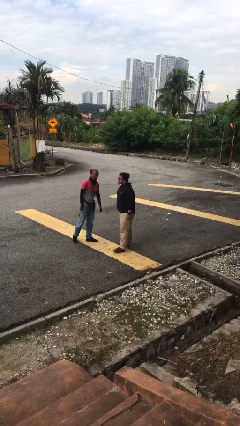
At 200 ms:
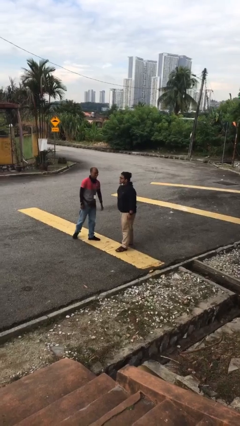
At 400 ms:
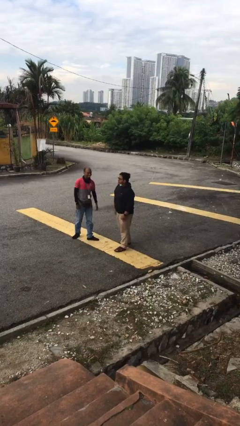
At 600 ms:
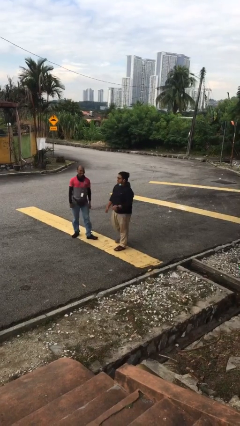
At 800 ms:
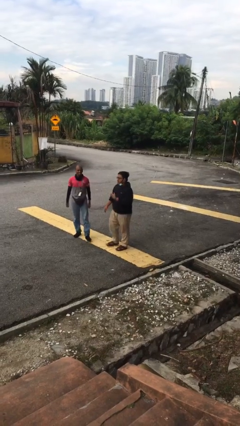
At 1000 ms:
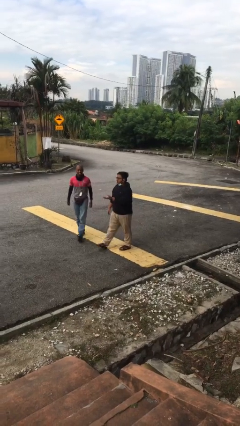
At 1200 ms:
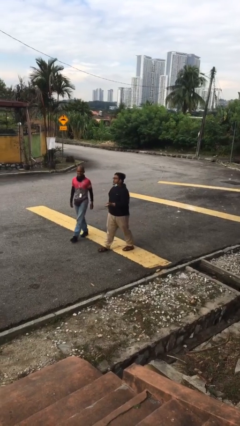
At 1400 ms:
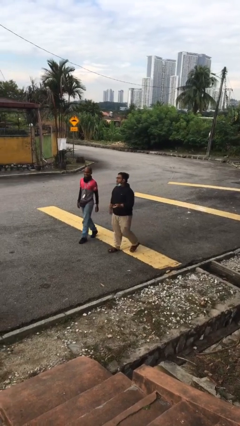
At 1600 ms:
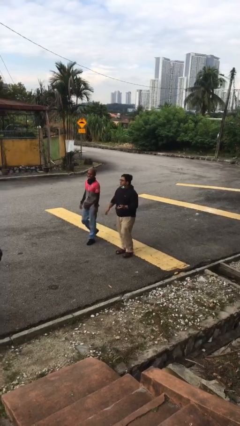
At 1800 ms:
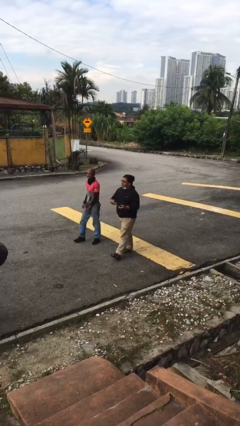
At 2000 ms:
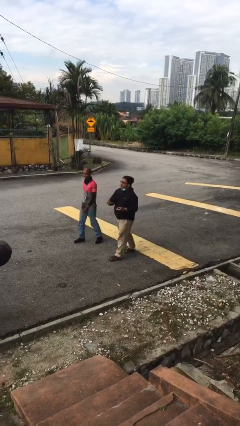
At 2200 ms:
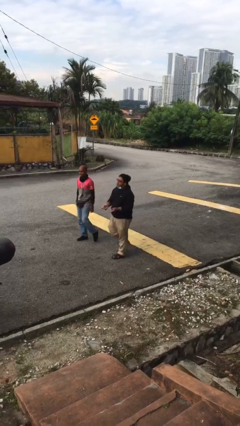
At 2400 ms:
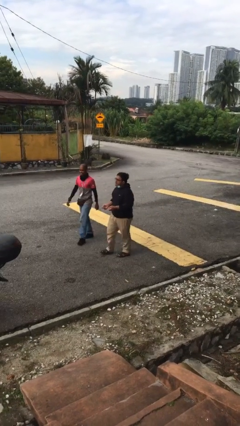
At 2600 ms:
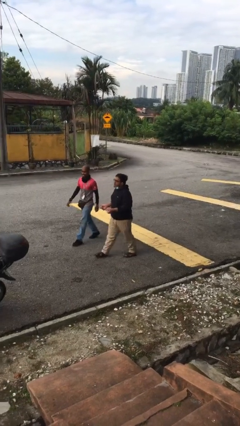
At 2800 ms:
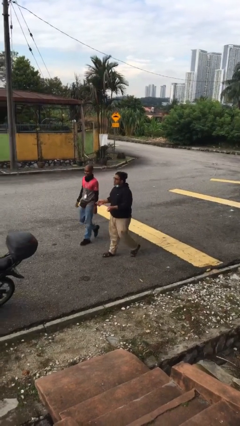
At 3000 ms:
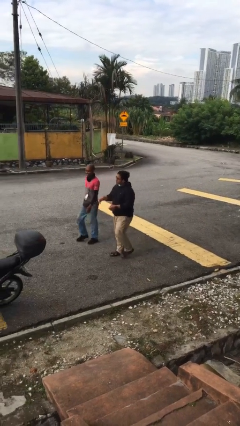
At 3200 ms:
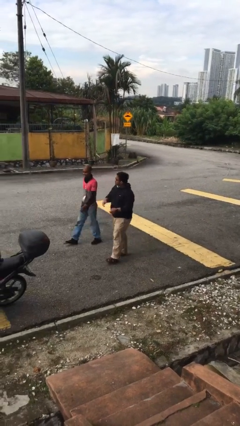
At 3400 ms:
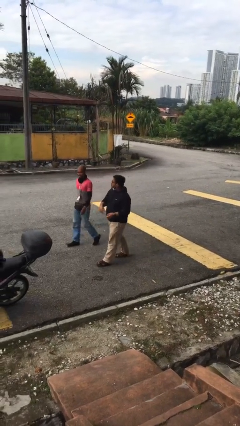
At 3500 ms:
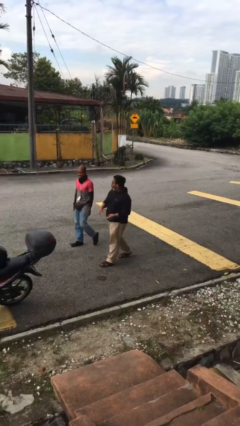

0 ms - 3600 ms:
person talks to person

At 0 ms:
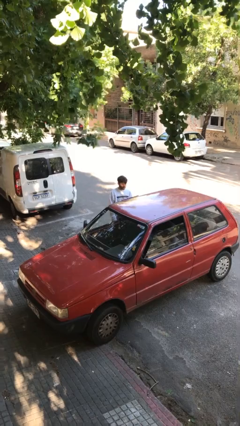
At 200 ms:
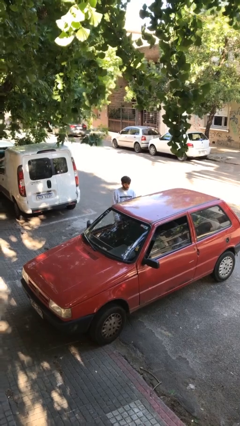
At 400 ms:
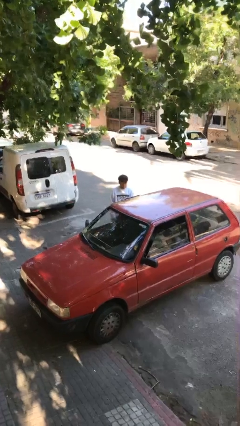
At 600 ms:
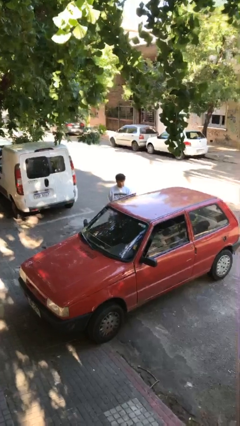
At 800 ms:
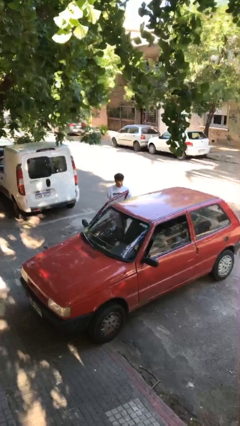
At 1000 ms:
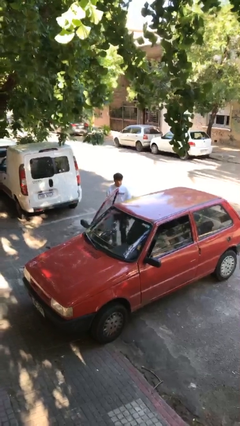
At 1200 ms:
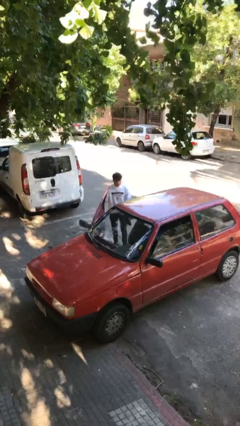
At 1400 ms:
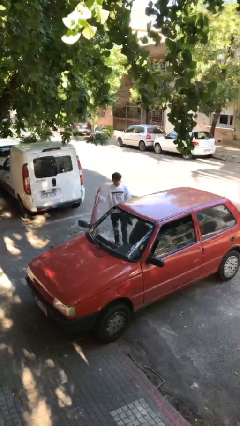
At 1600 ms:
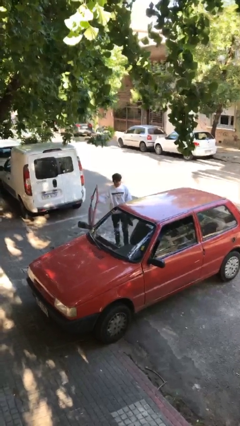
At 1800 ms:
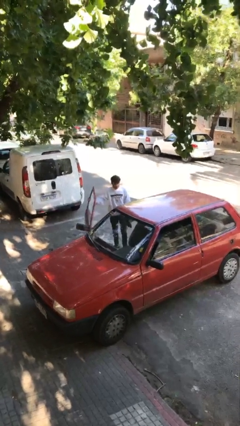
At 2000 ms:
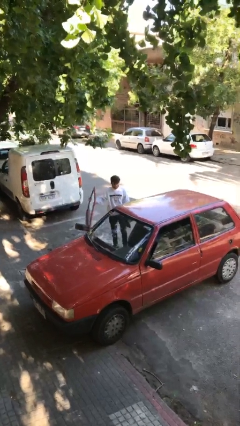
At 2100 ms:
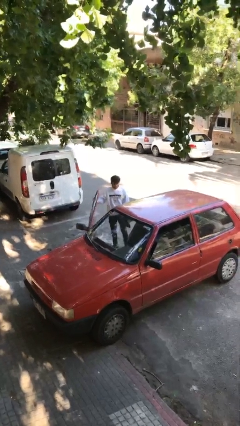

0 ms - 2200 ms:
person opens car door

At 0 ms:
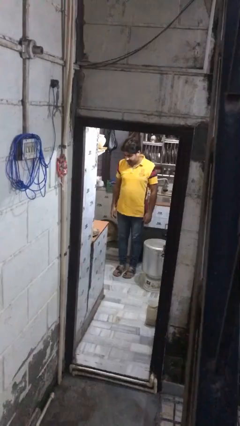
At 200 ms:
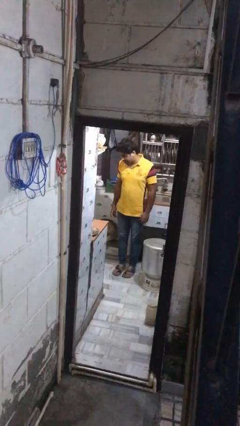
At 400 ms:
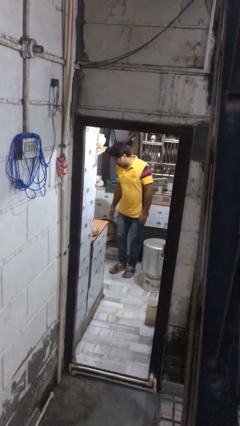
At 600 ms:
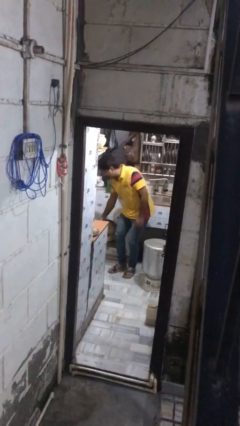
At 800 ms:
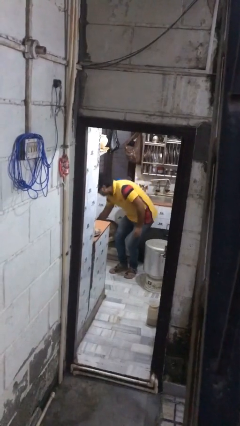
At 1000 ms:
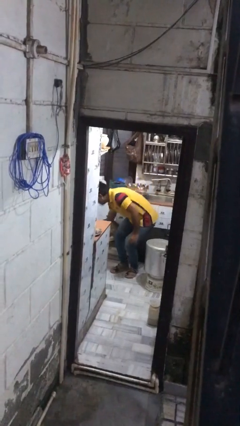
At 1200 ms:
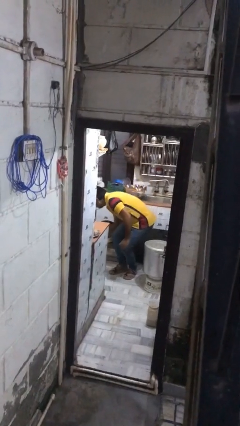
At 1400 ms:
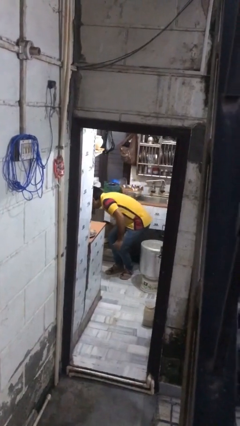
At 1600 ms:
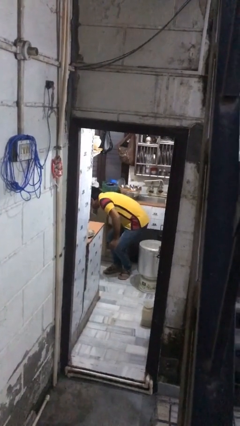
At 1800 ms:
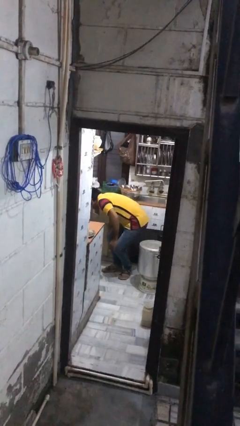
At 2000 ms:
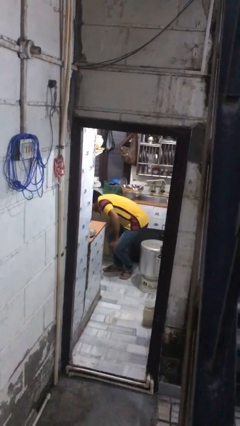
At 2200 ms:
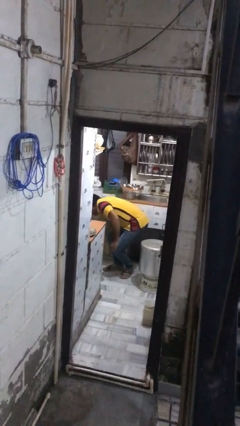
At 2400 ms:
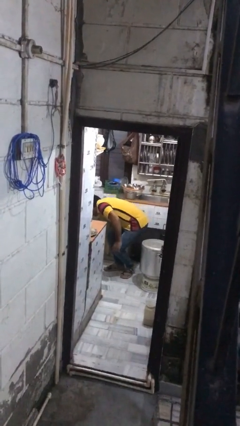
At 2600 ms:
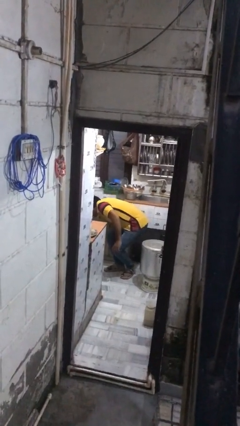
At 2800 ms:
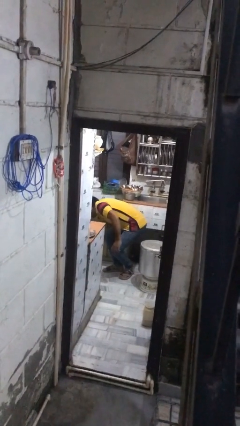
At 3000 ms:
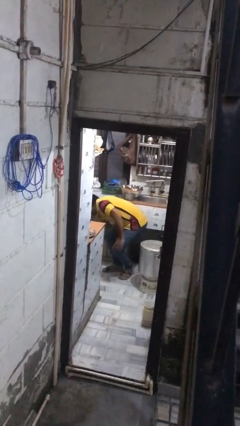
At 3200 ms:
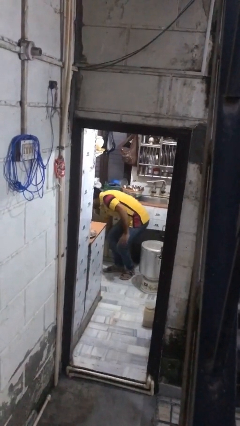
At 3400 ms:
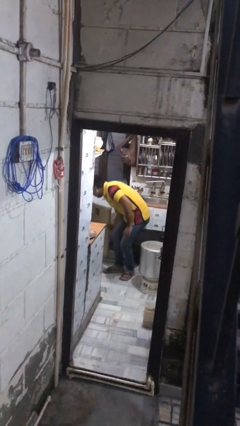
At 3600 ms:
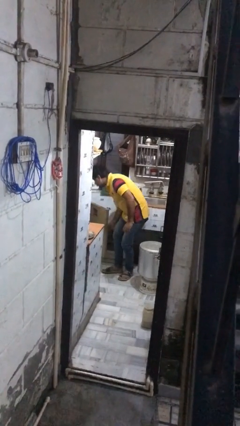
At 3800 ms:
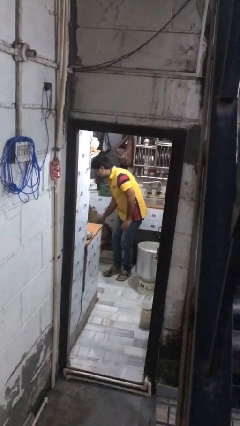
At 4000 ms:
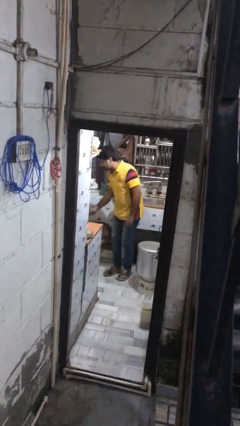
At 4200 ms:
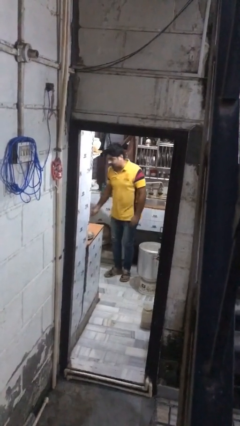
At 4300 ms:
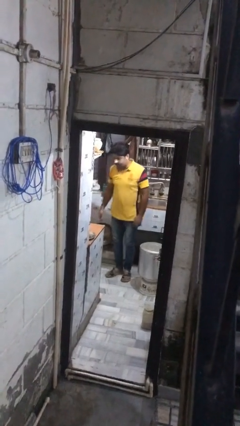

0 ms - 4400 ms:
person searches in kitchen drawer

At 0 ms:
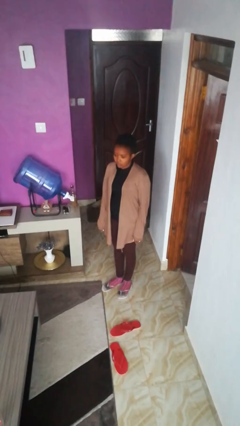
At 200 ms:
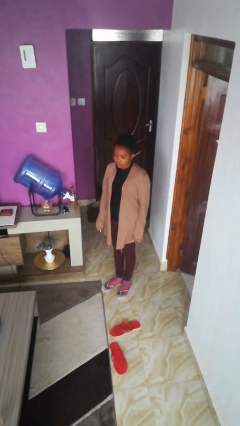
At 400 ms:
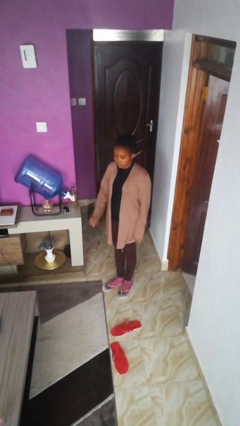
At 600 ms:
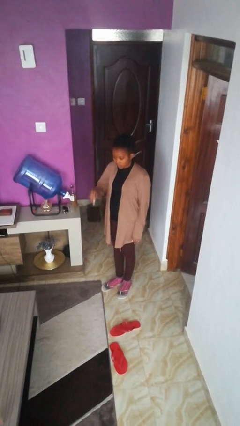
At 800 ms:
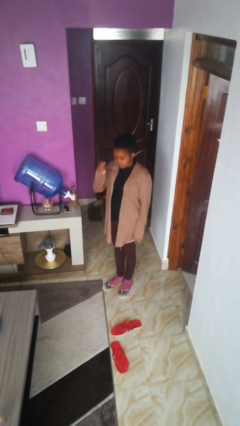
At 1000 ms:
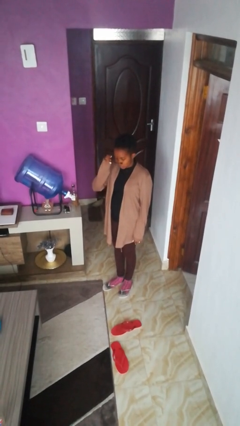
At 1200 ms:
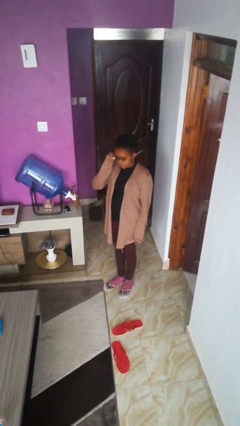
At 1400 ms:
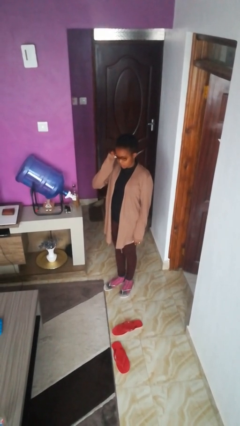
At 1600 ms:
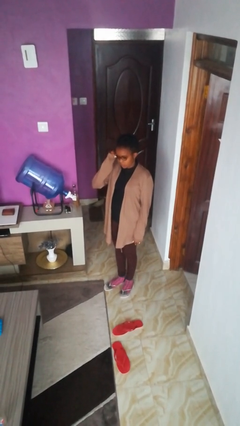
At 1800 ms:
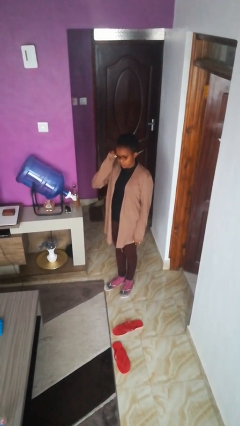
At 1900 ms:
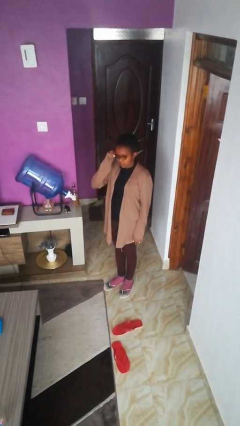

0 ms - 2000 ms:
person puts on glasses

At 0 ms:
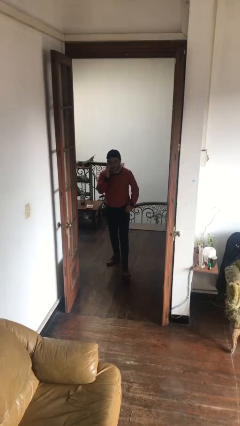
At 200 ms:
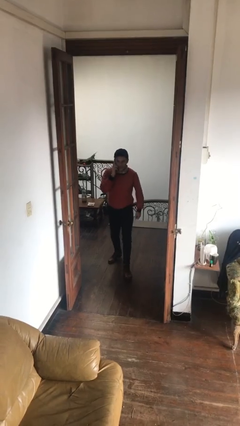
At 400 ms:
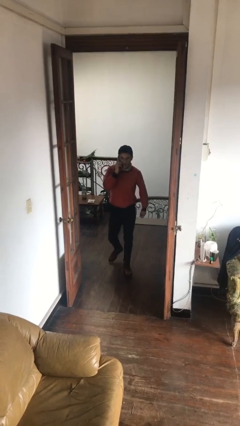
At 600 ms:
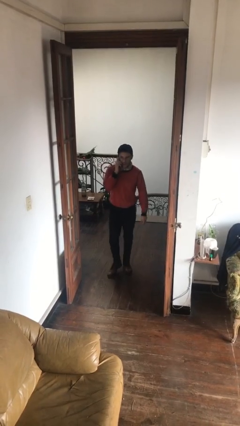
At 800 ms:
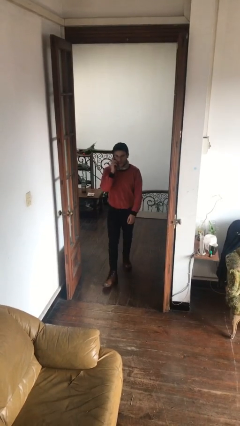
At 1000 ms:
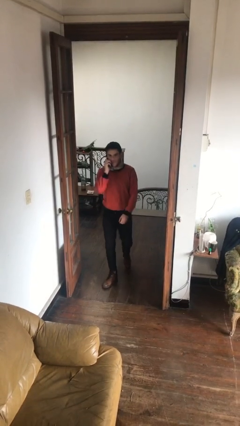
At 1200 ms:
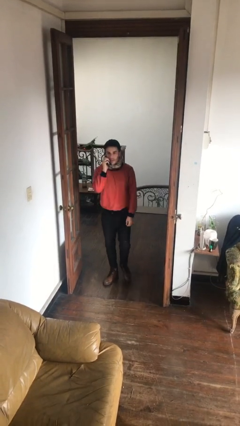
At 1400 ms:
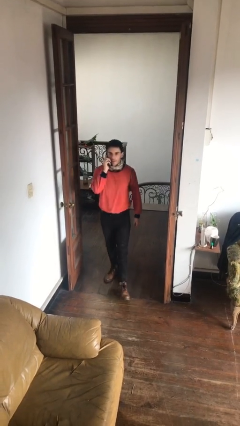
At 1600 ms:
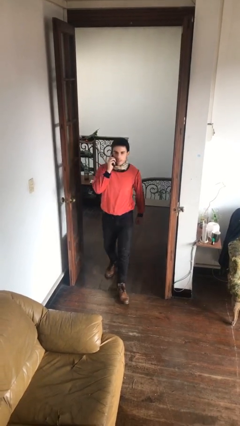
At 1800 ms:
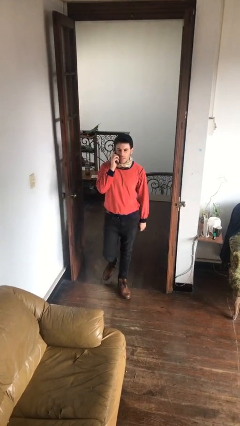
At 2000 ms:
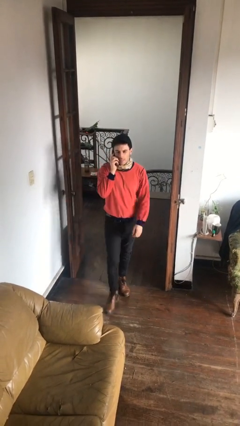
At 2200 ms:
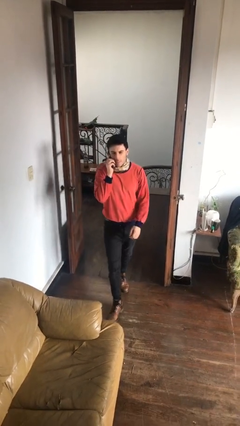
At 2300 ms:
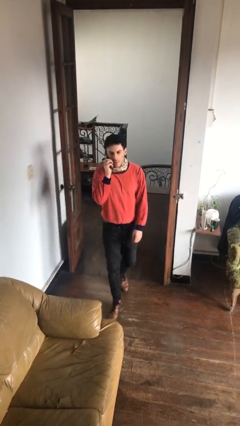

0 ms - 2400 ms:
person enters scene through structure

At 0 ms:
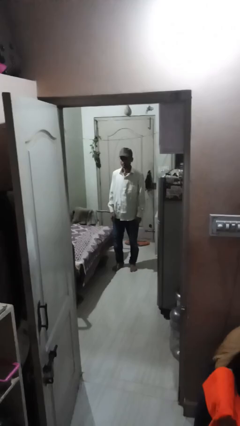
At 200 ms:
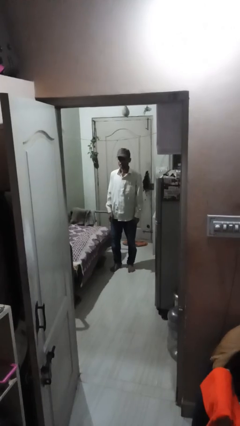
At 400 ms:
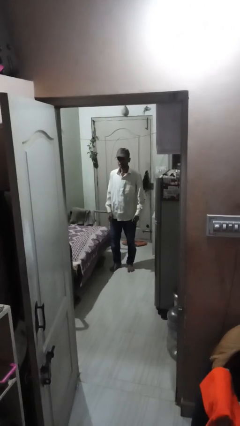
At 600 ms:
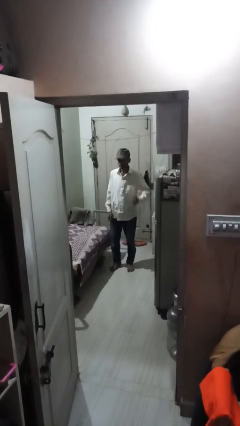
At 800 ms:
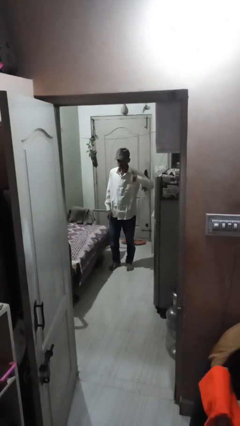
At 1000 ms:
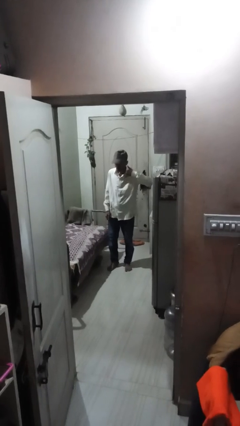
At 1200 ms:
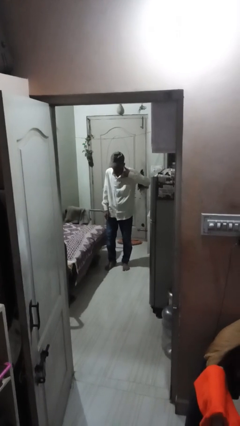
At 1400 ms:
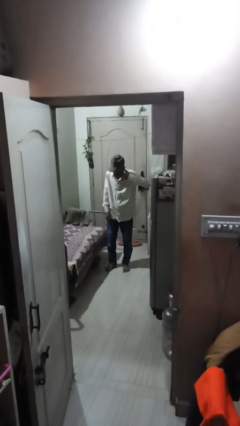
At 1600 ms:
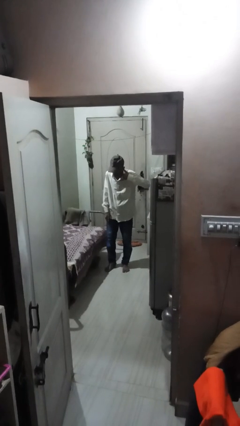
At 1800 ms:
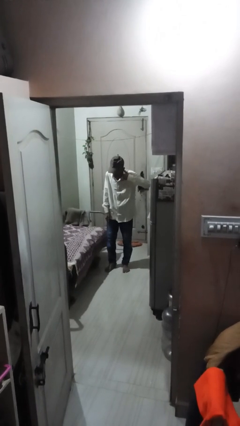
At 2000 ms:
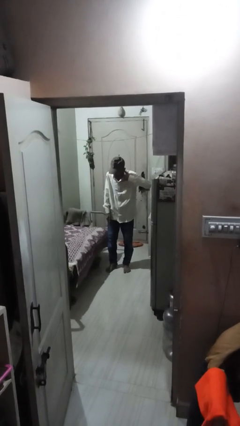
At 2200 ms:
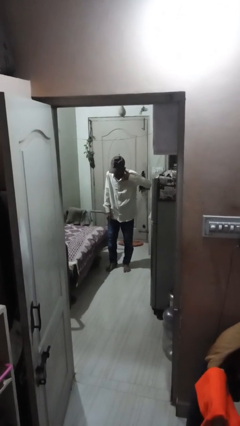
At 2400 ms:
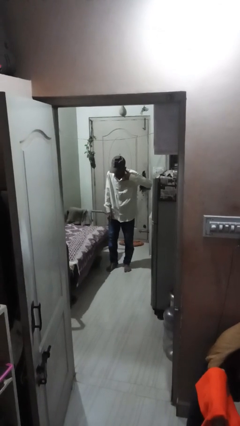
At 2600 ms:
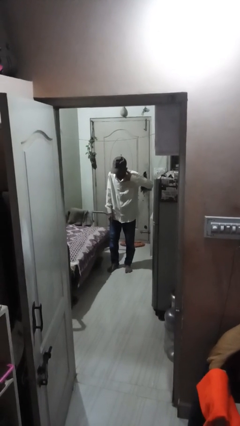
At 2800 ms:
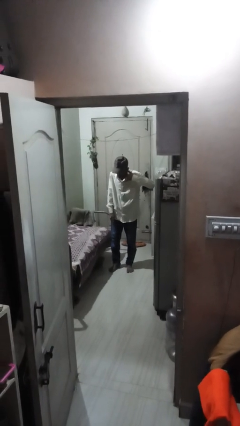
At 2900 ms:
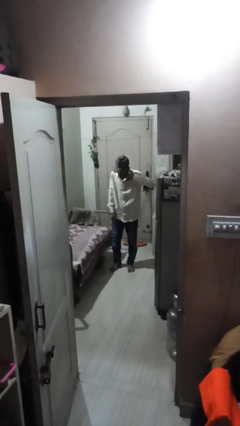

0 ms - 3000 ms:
person gestures call me
